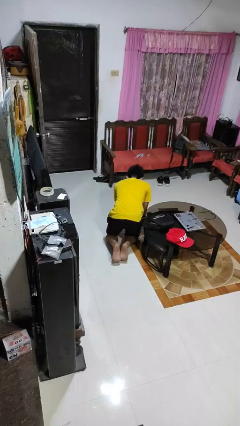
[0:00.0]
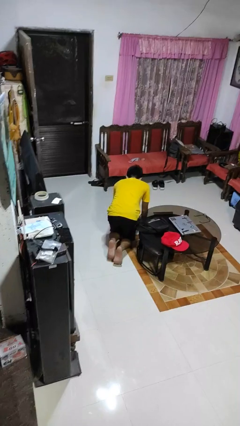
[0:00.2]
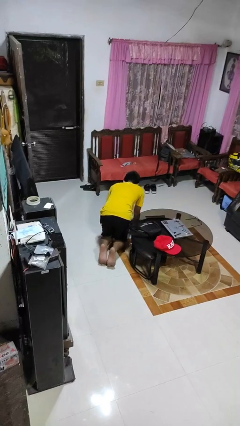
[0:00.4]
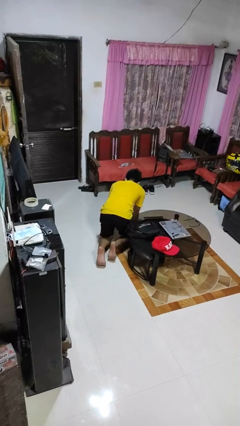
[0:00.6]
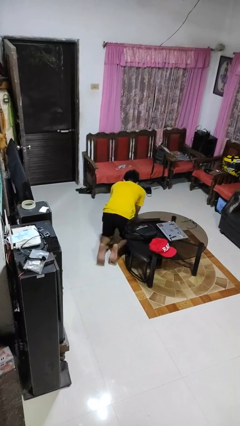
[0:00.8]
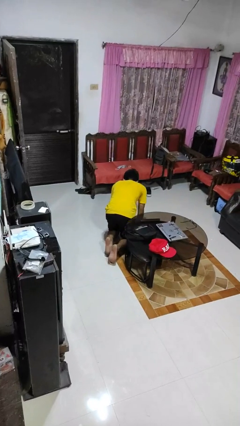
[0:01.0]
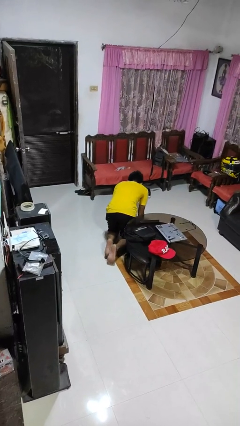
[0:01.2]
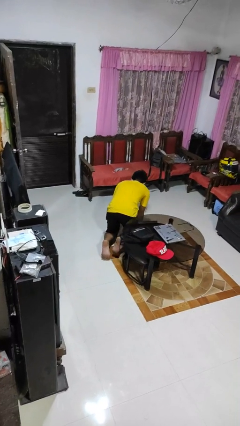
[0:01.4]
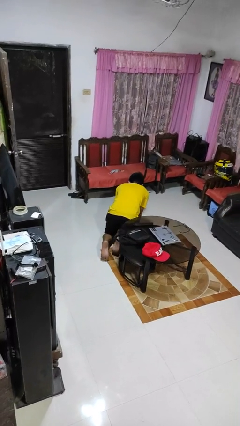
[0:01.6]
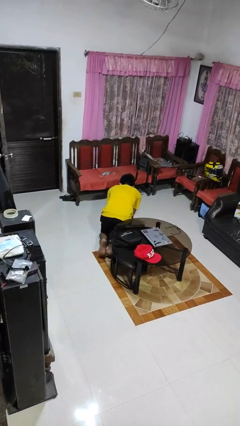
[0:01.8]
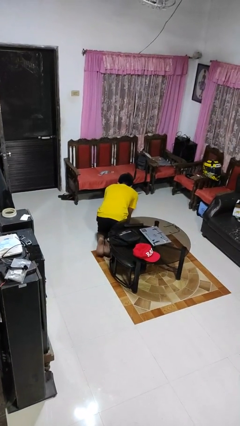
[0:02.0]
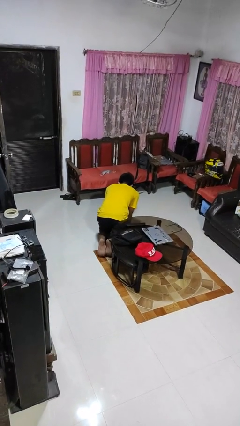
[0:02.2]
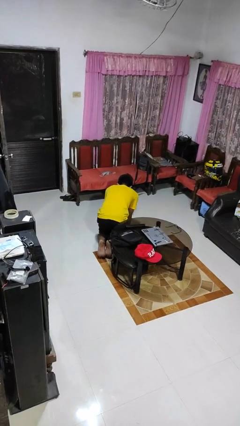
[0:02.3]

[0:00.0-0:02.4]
person crawls

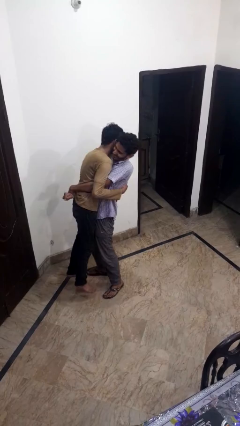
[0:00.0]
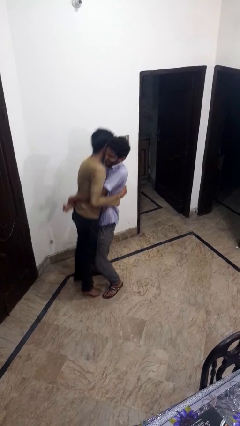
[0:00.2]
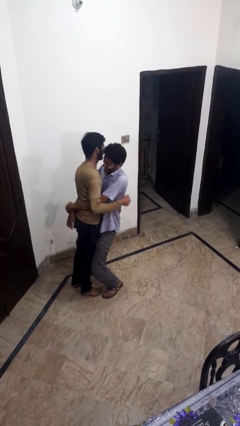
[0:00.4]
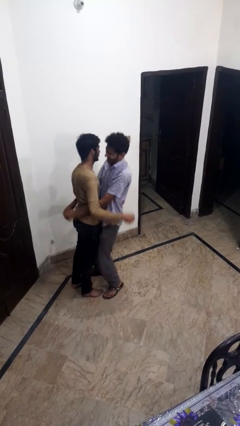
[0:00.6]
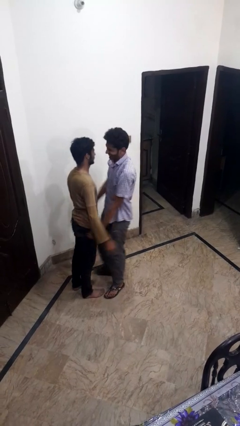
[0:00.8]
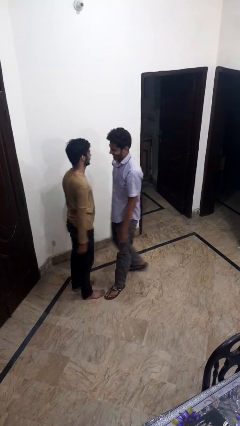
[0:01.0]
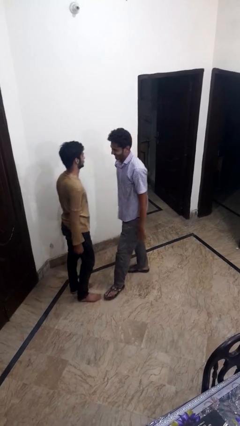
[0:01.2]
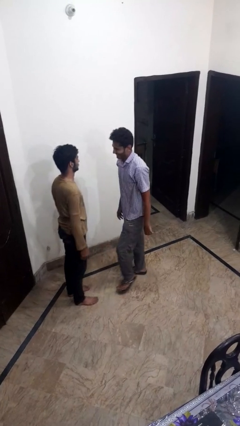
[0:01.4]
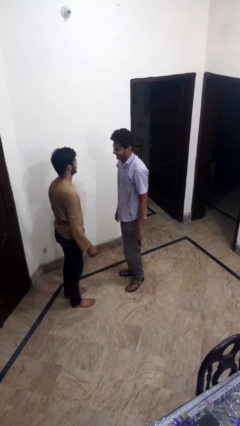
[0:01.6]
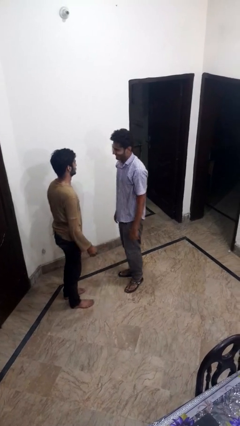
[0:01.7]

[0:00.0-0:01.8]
person puts down person

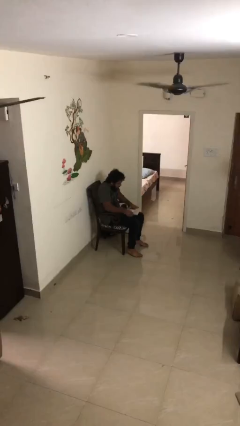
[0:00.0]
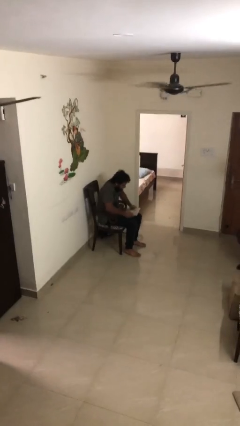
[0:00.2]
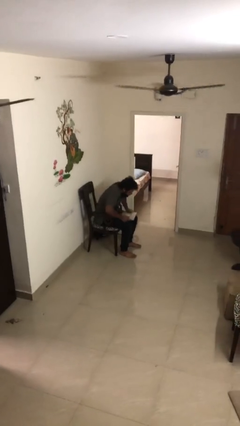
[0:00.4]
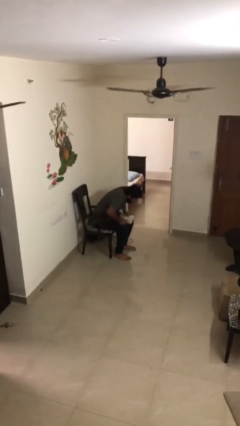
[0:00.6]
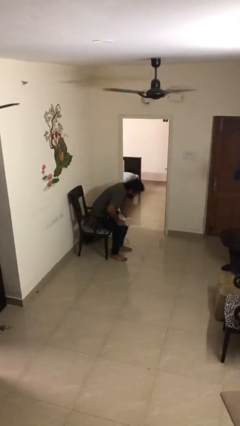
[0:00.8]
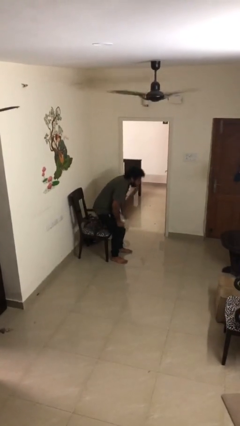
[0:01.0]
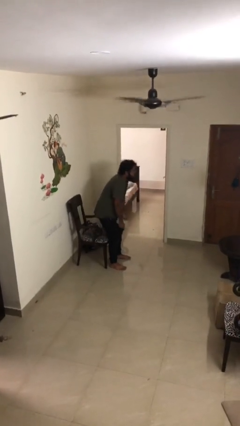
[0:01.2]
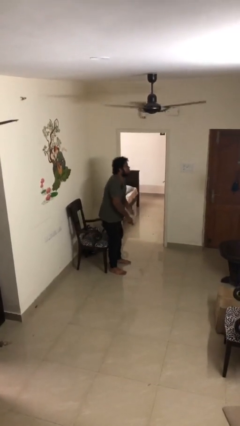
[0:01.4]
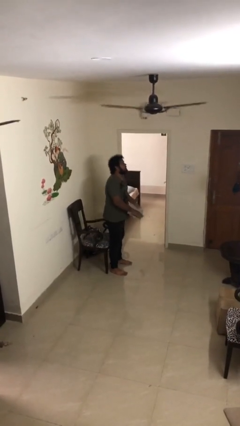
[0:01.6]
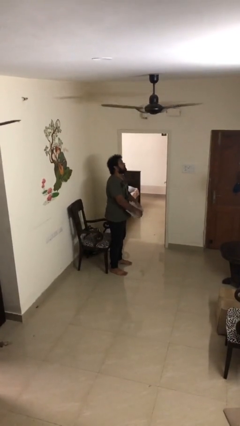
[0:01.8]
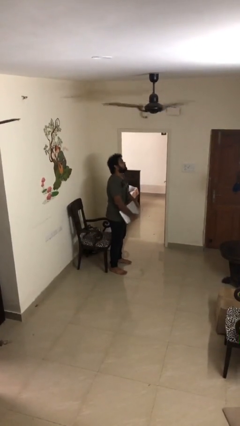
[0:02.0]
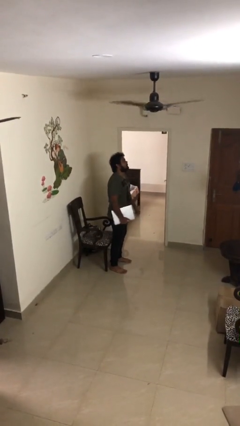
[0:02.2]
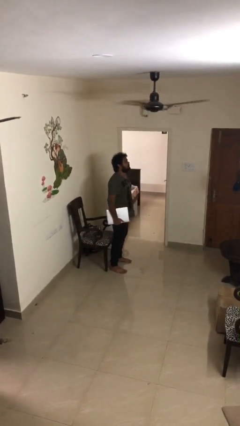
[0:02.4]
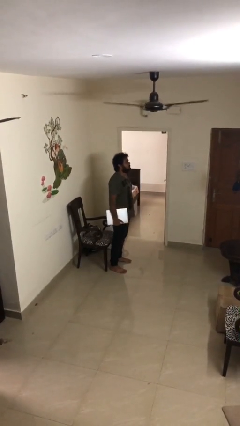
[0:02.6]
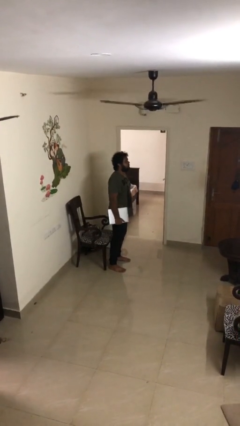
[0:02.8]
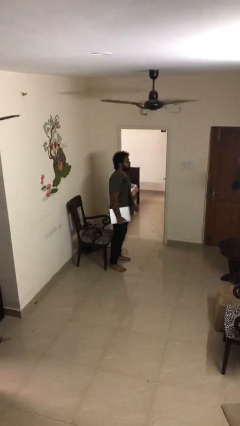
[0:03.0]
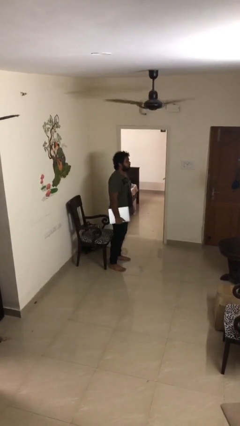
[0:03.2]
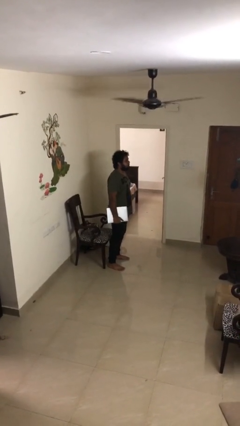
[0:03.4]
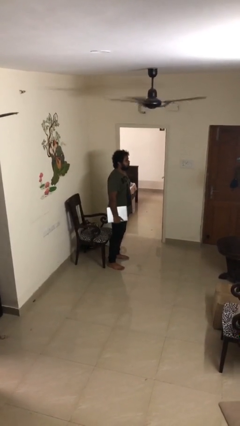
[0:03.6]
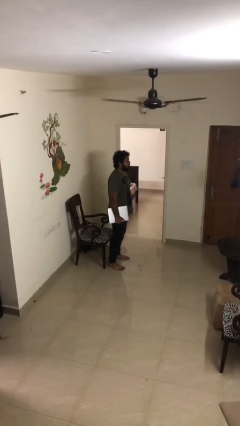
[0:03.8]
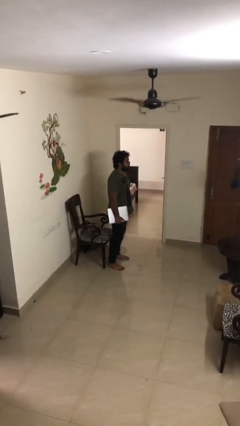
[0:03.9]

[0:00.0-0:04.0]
person stands up

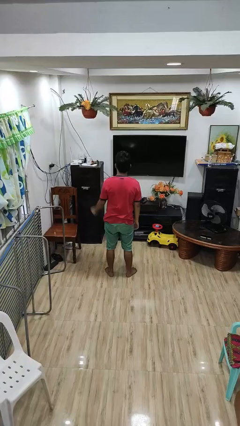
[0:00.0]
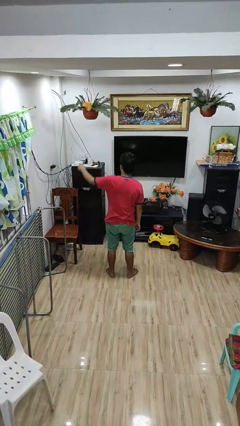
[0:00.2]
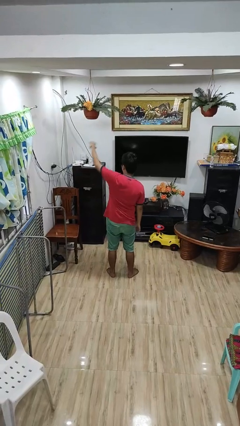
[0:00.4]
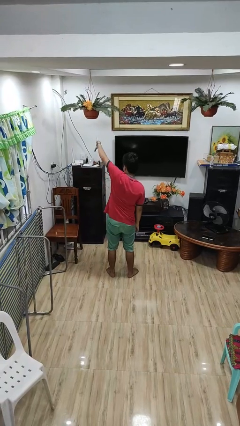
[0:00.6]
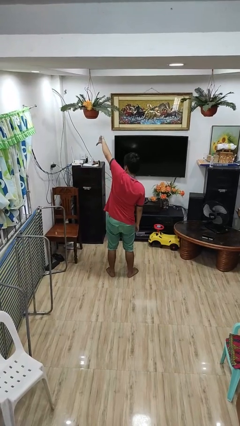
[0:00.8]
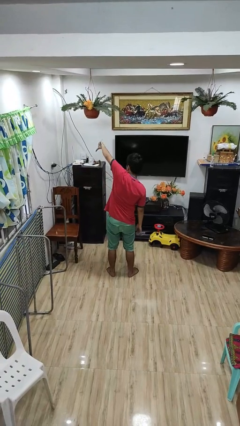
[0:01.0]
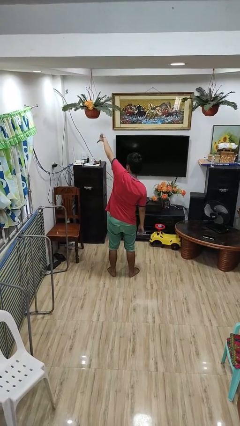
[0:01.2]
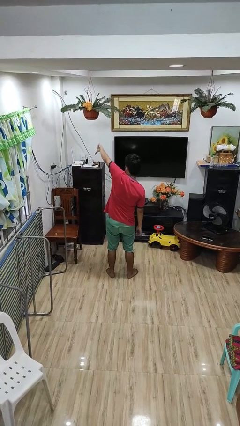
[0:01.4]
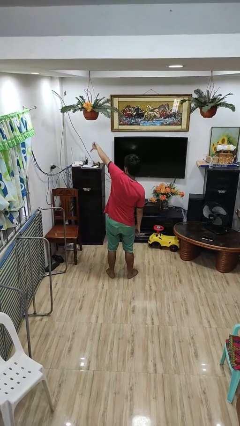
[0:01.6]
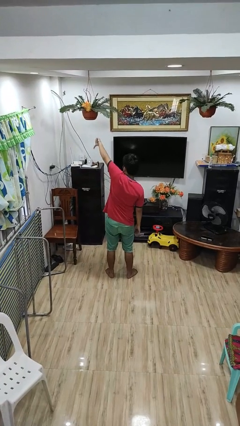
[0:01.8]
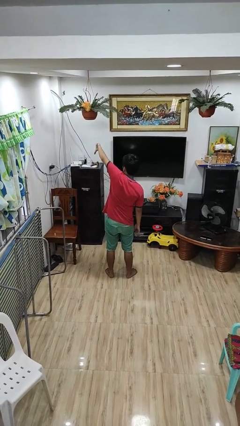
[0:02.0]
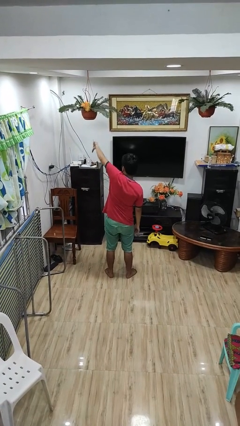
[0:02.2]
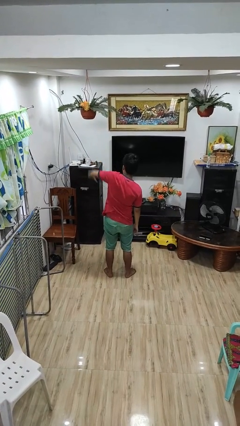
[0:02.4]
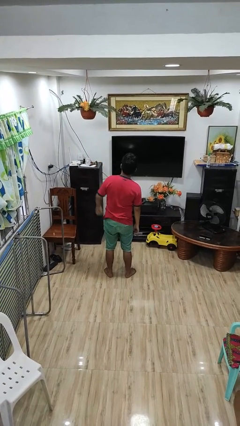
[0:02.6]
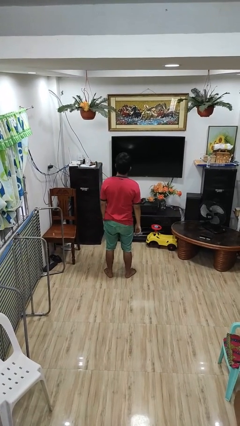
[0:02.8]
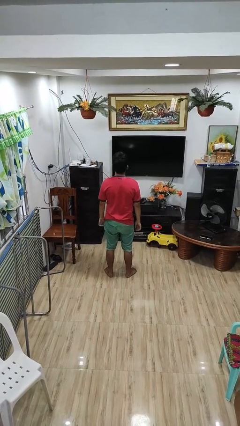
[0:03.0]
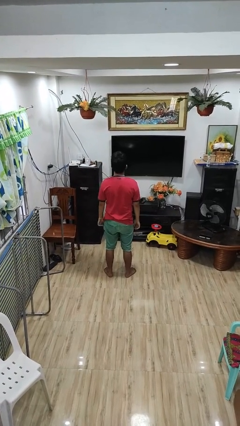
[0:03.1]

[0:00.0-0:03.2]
person gestures thumbs down

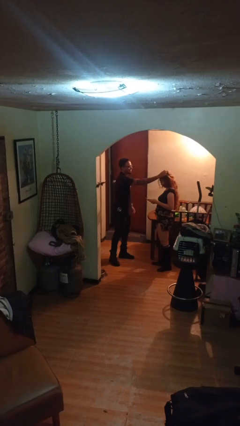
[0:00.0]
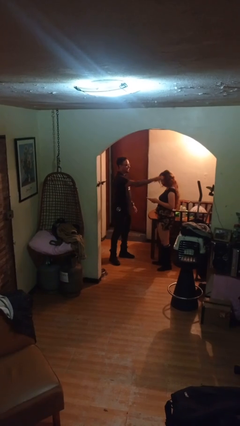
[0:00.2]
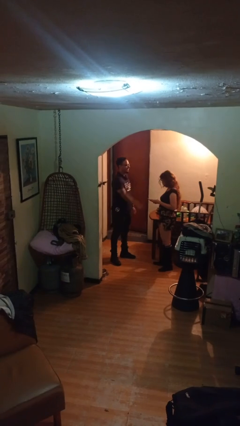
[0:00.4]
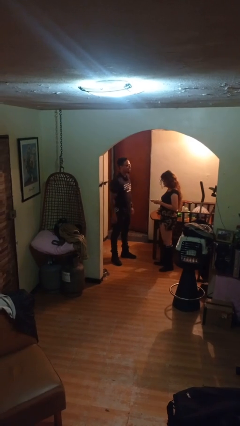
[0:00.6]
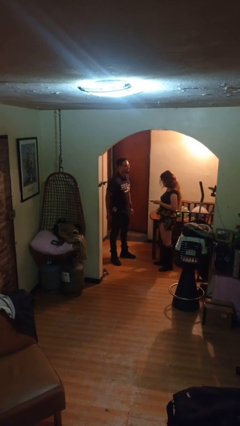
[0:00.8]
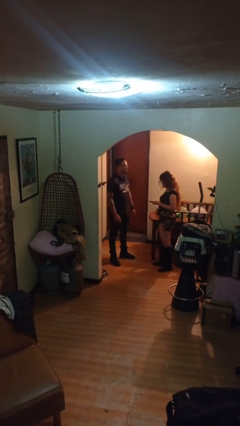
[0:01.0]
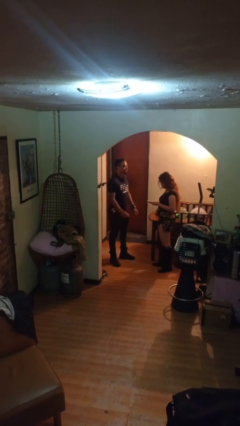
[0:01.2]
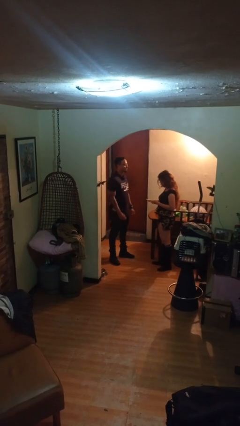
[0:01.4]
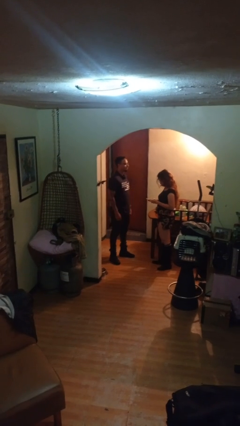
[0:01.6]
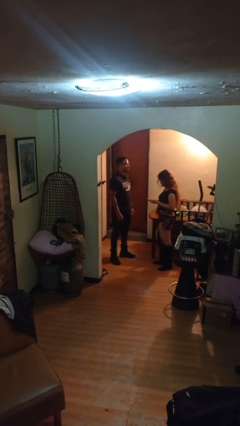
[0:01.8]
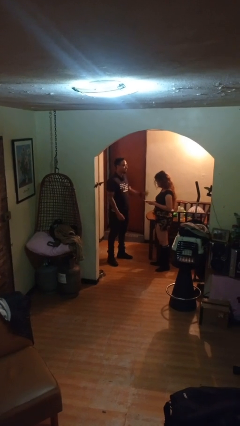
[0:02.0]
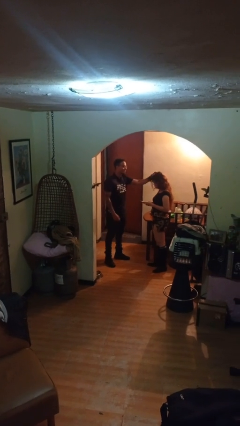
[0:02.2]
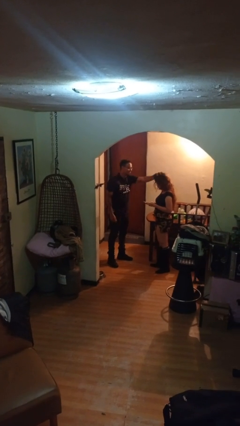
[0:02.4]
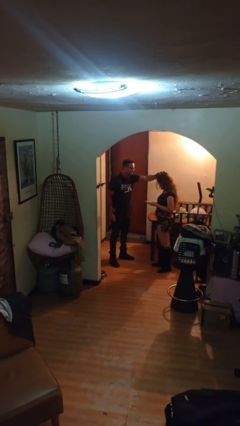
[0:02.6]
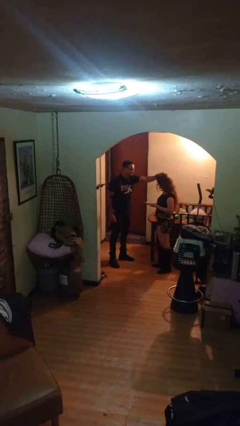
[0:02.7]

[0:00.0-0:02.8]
person picks up object from table

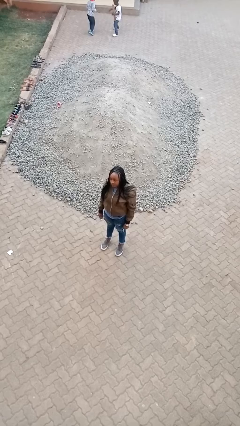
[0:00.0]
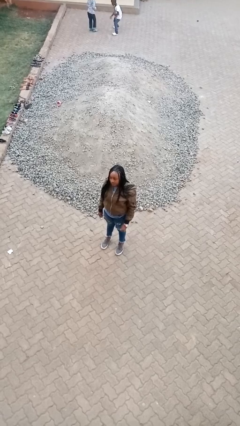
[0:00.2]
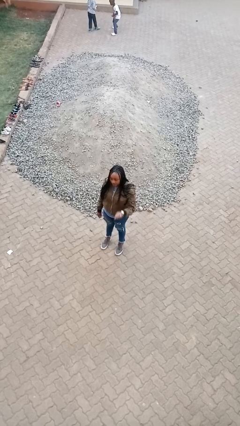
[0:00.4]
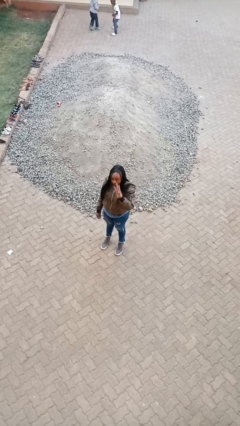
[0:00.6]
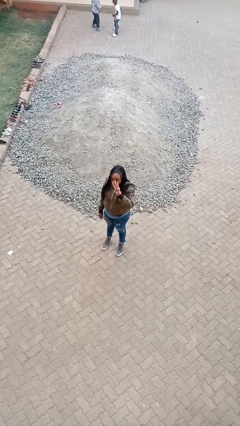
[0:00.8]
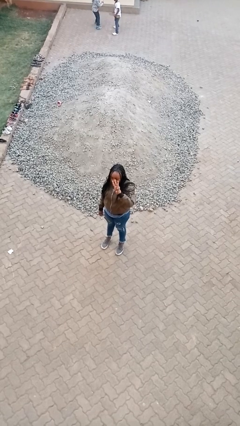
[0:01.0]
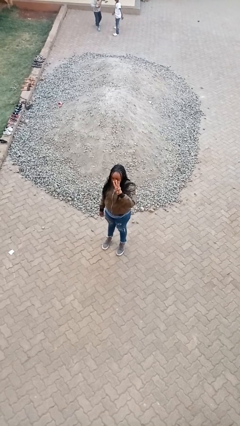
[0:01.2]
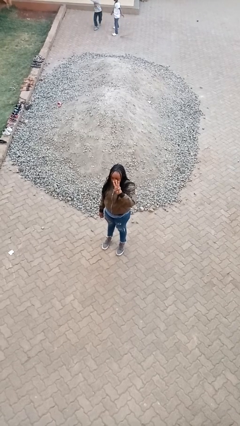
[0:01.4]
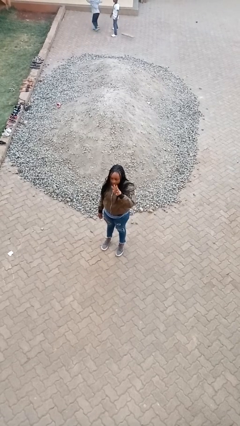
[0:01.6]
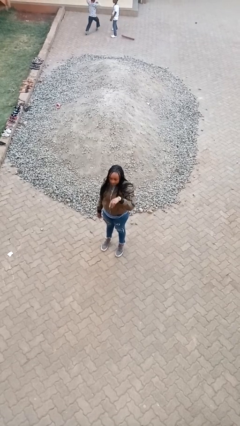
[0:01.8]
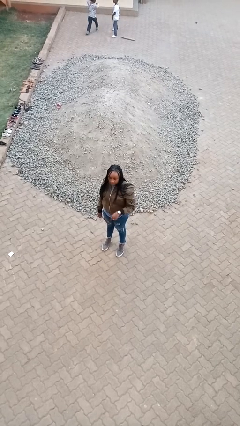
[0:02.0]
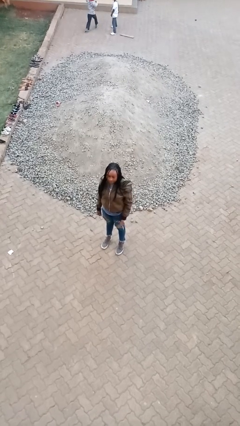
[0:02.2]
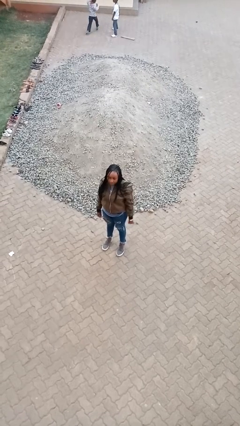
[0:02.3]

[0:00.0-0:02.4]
person gestures number three

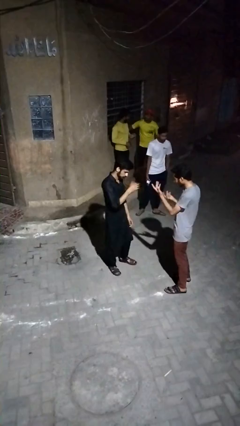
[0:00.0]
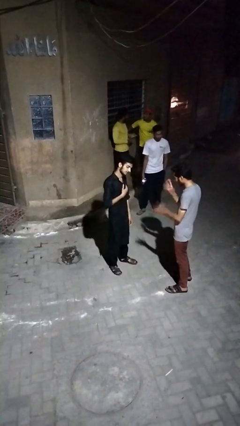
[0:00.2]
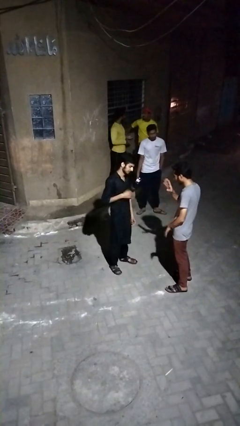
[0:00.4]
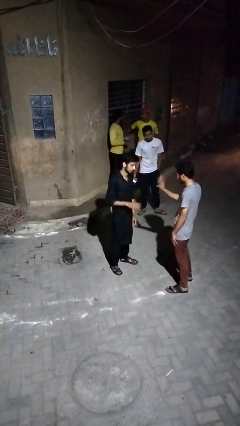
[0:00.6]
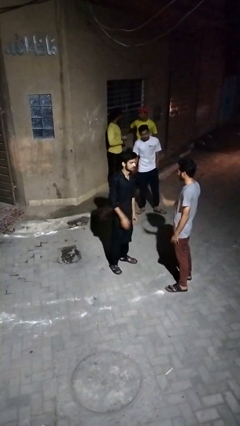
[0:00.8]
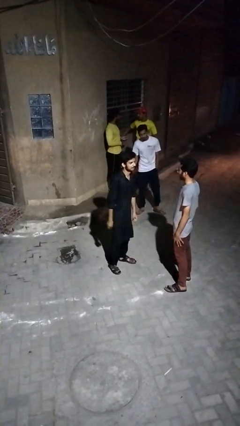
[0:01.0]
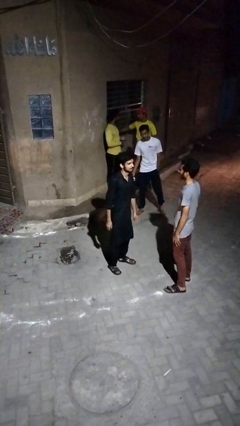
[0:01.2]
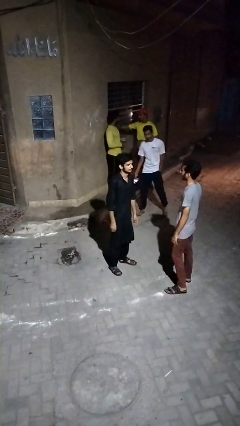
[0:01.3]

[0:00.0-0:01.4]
person talks to person
